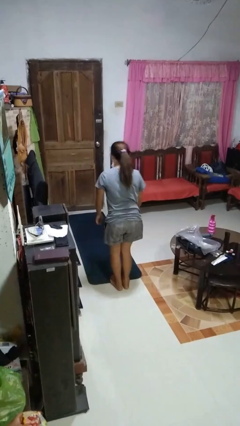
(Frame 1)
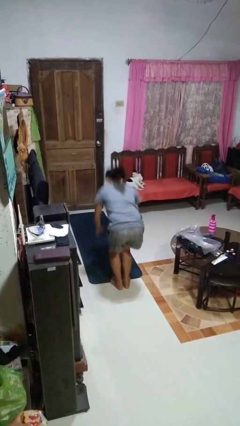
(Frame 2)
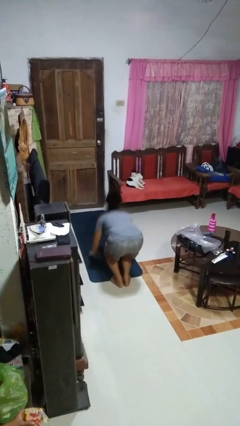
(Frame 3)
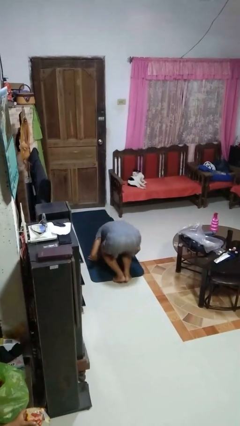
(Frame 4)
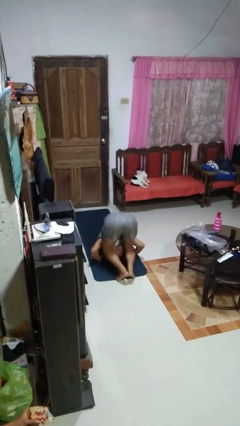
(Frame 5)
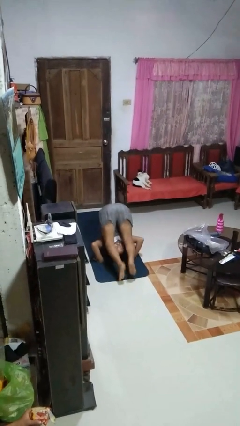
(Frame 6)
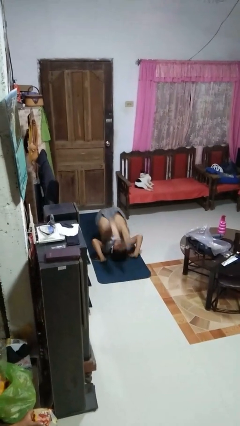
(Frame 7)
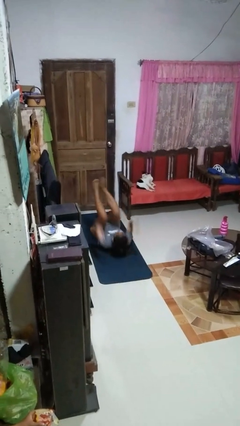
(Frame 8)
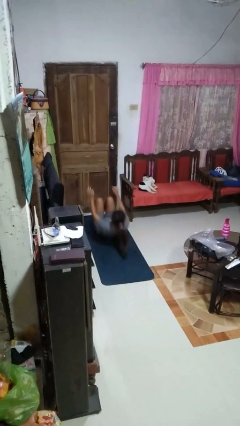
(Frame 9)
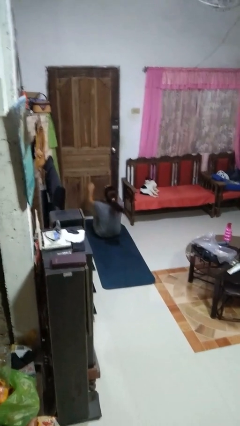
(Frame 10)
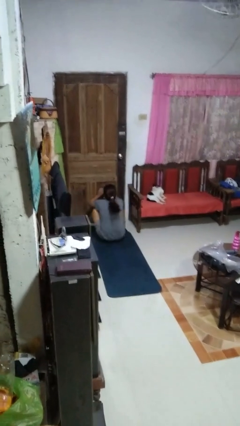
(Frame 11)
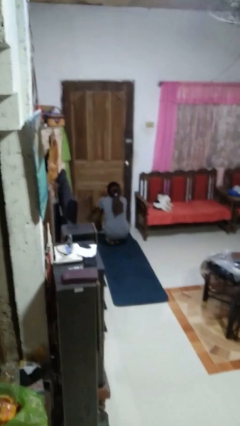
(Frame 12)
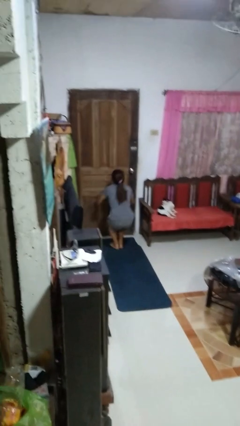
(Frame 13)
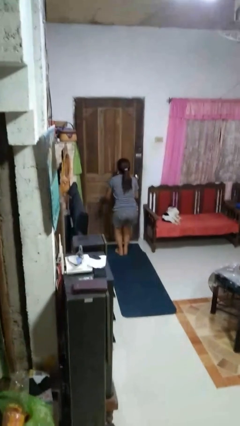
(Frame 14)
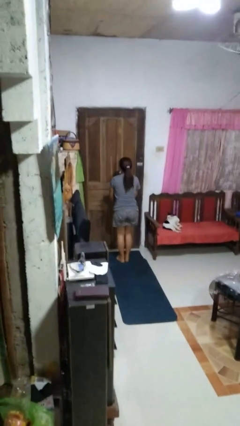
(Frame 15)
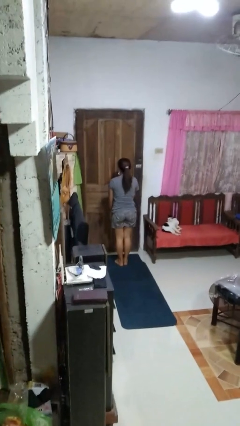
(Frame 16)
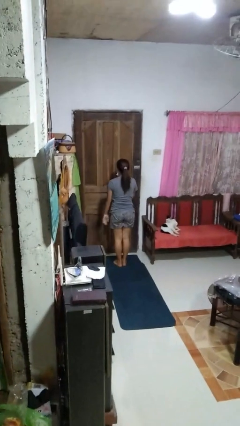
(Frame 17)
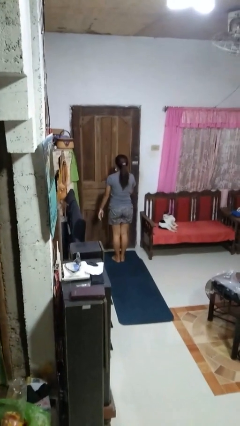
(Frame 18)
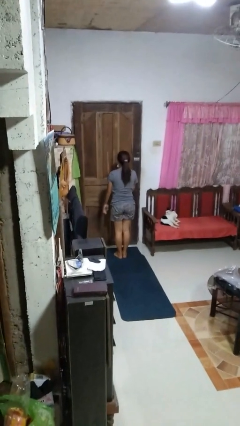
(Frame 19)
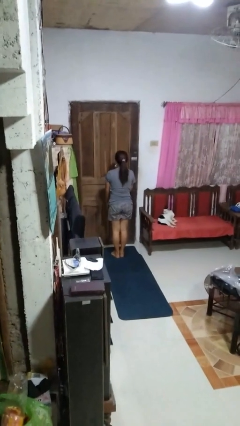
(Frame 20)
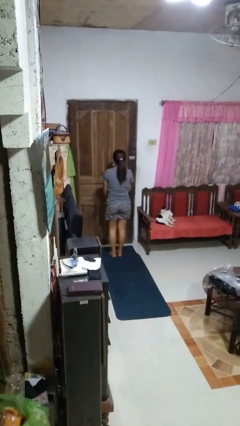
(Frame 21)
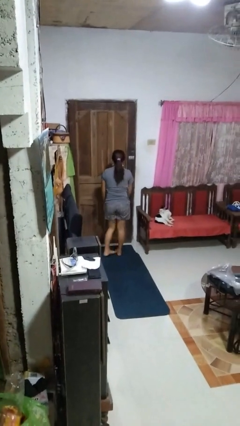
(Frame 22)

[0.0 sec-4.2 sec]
person somersaults

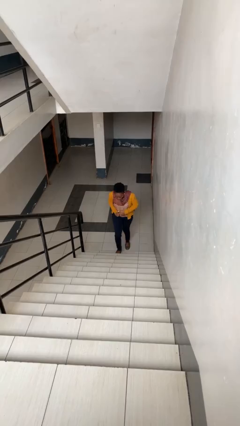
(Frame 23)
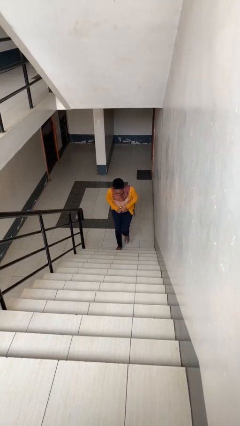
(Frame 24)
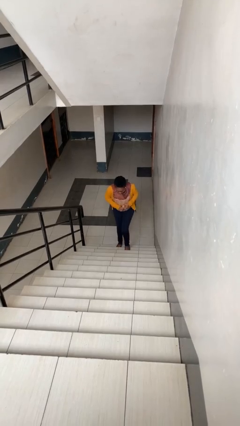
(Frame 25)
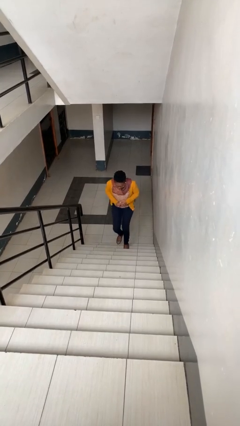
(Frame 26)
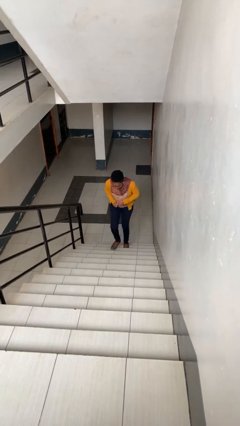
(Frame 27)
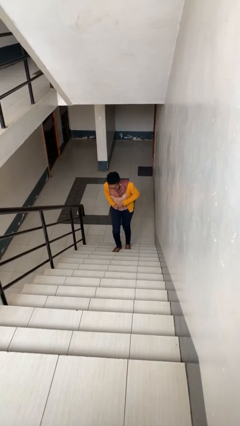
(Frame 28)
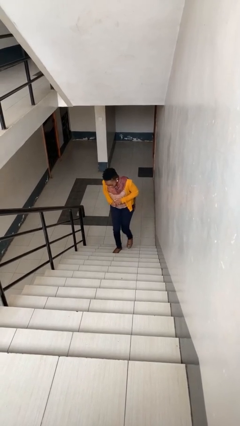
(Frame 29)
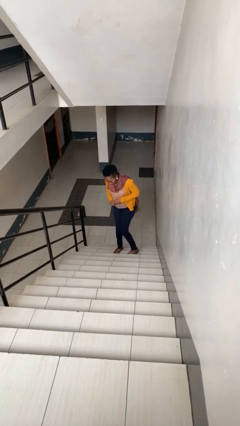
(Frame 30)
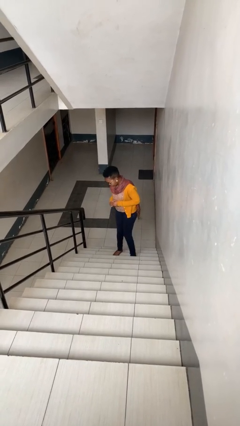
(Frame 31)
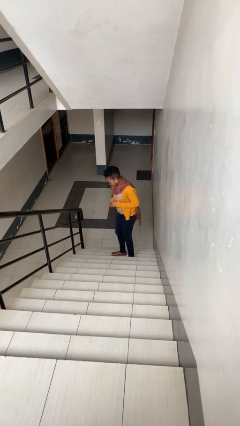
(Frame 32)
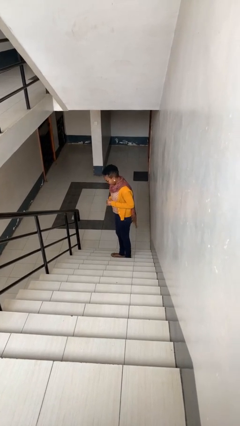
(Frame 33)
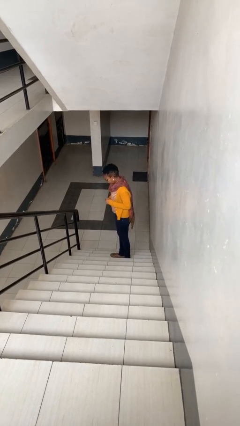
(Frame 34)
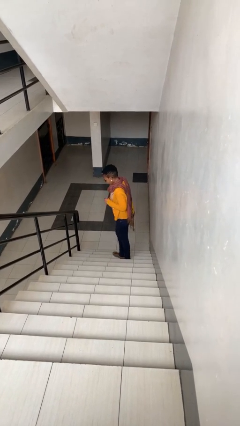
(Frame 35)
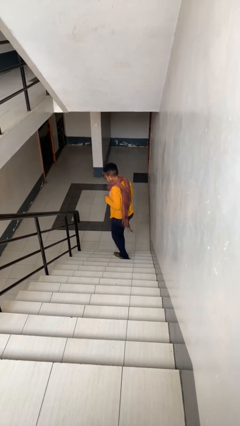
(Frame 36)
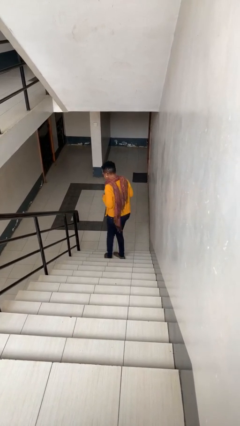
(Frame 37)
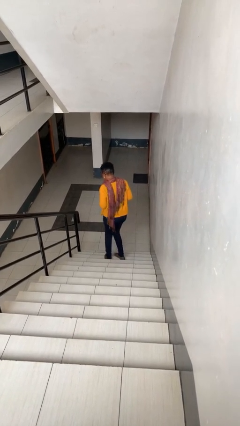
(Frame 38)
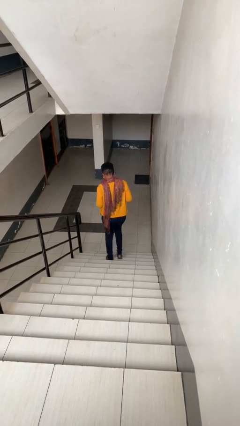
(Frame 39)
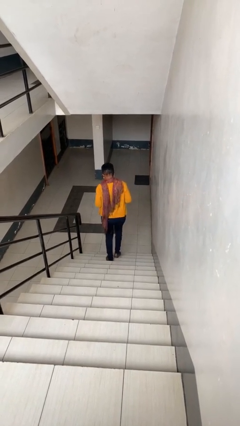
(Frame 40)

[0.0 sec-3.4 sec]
person climbs up stairs

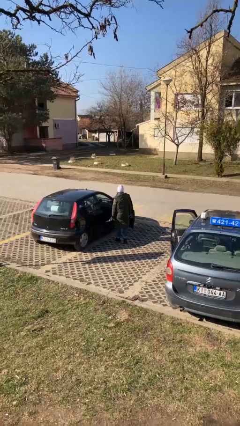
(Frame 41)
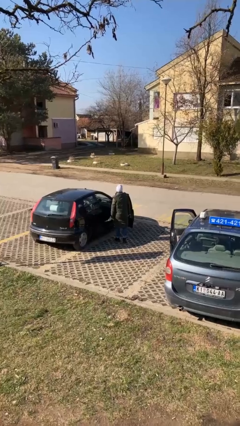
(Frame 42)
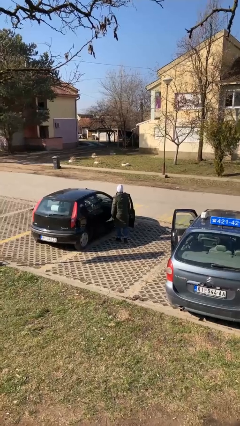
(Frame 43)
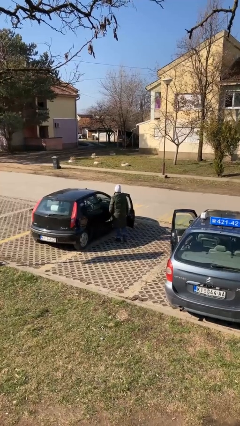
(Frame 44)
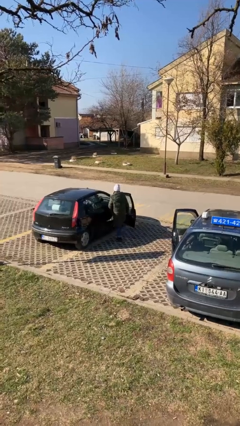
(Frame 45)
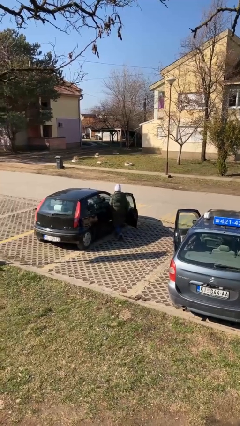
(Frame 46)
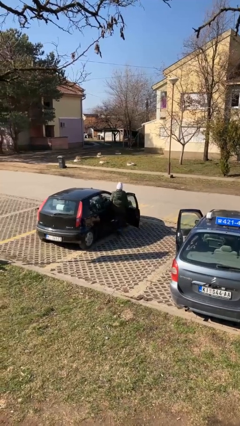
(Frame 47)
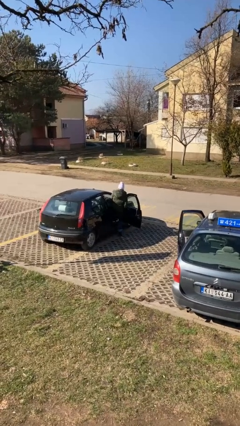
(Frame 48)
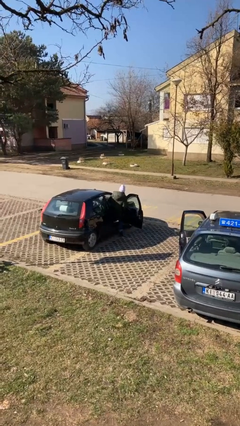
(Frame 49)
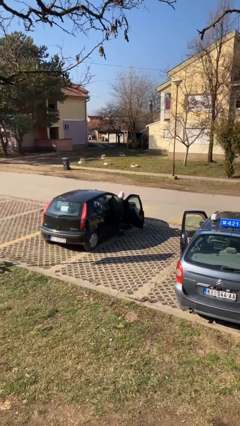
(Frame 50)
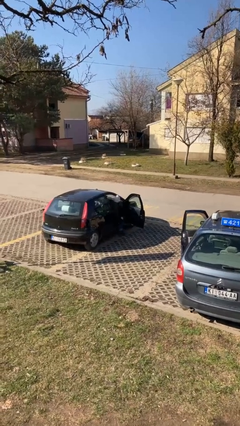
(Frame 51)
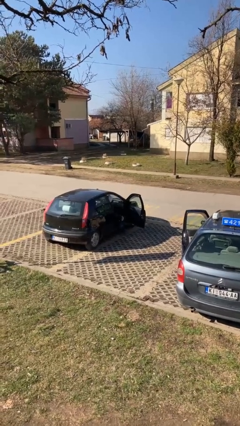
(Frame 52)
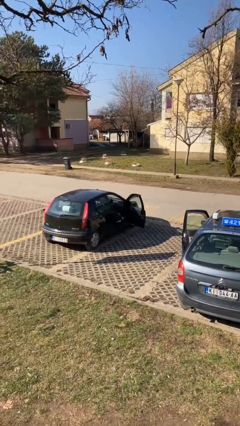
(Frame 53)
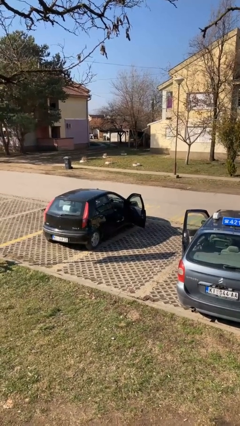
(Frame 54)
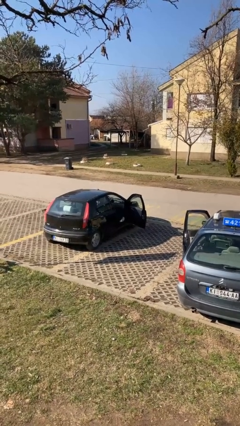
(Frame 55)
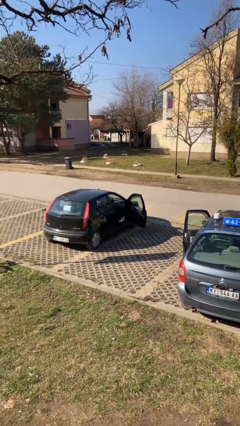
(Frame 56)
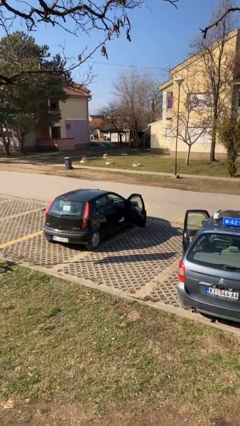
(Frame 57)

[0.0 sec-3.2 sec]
person enters car

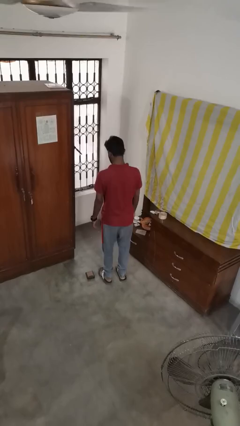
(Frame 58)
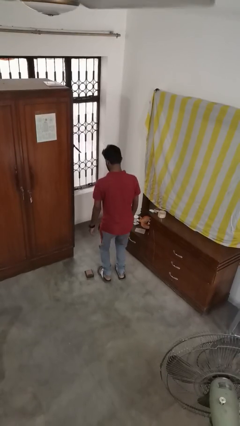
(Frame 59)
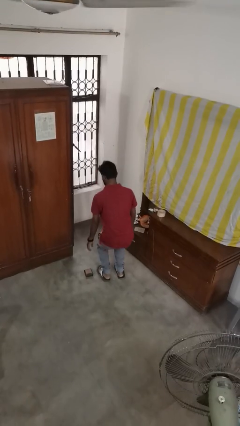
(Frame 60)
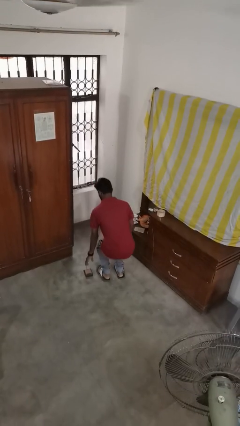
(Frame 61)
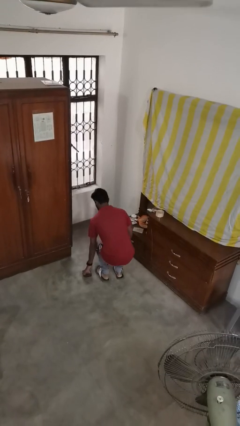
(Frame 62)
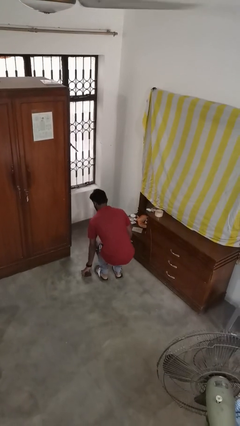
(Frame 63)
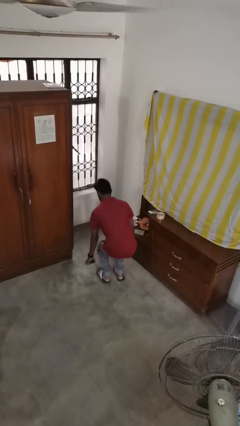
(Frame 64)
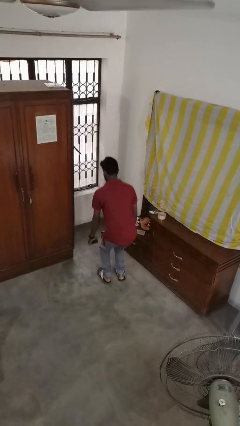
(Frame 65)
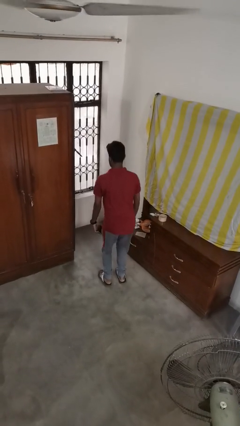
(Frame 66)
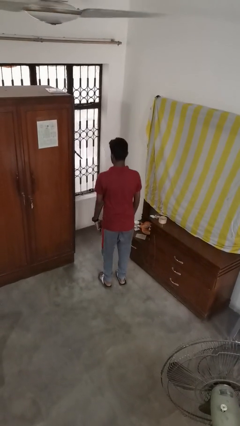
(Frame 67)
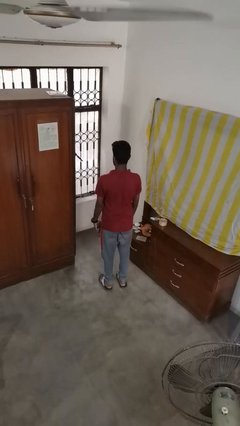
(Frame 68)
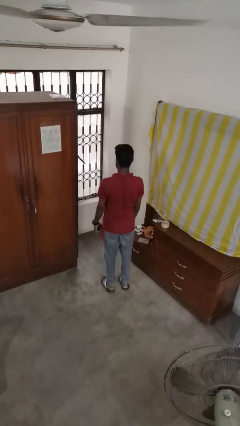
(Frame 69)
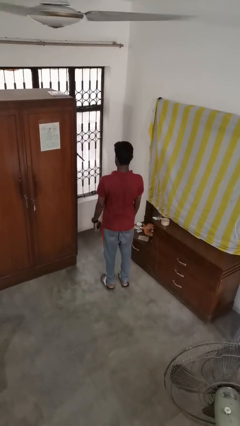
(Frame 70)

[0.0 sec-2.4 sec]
person picks up object from floor

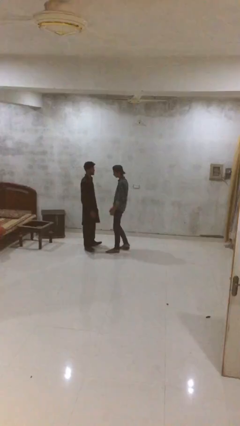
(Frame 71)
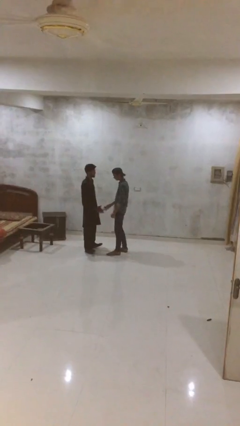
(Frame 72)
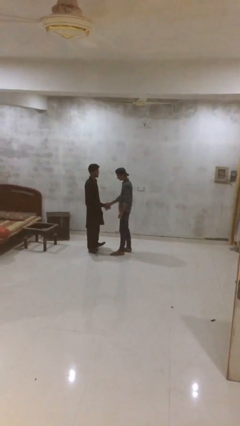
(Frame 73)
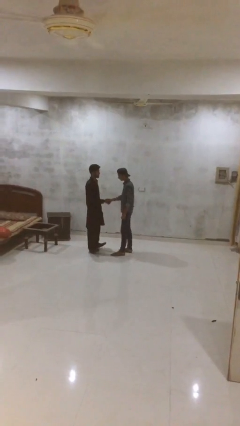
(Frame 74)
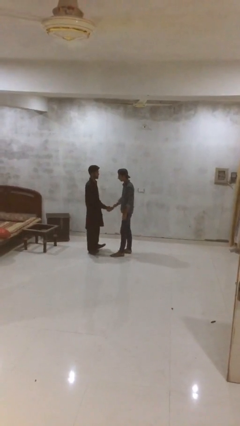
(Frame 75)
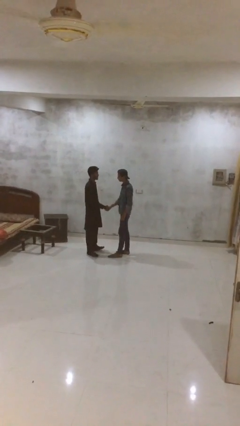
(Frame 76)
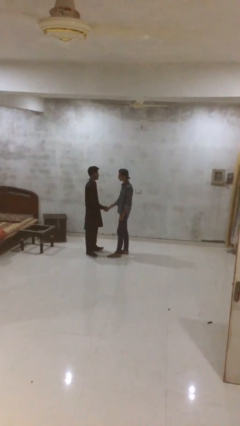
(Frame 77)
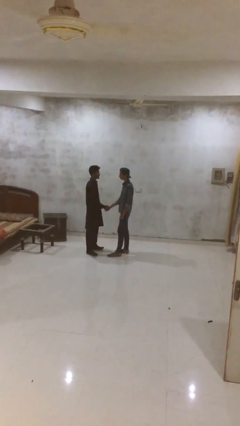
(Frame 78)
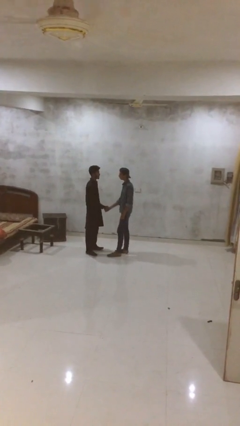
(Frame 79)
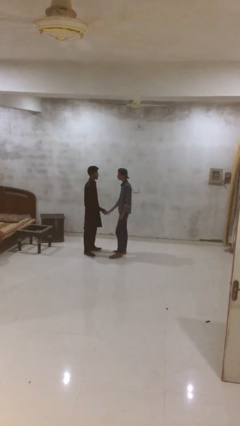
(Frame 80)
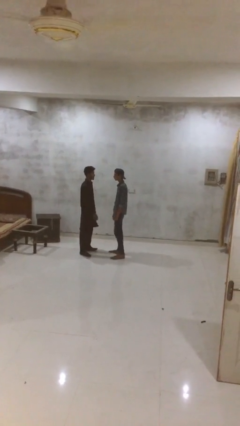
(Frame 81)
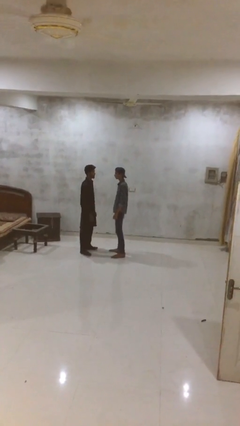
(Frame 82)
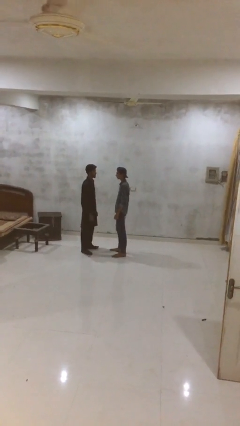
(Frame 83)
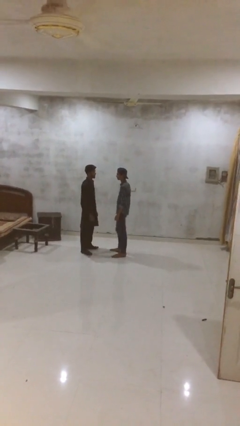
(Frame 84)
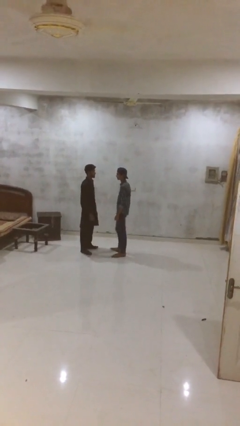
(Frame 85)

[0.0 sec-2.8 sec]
person shakes hand

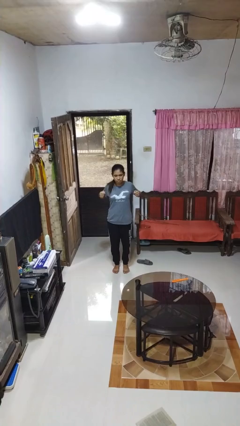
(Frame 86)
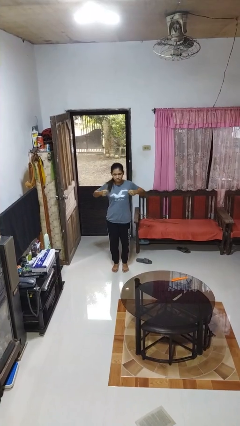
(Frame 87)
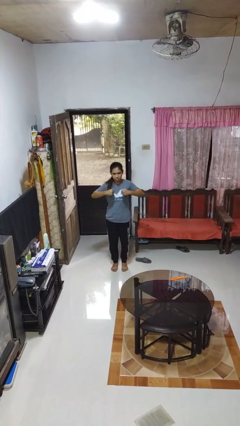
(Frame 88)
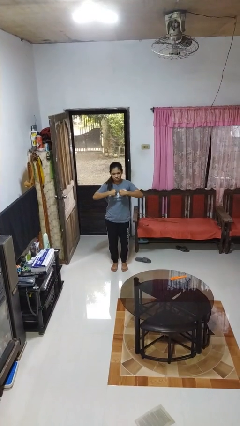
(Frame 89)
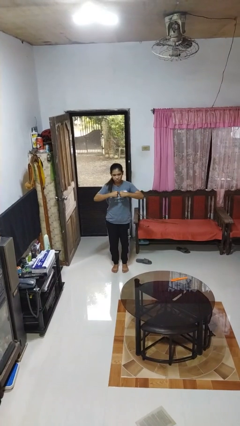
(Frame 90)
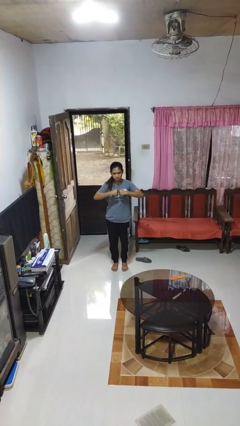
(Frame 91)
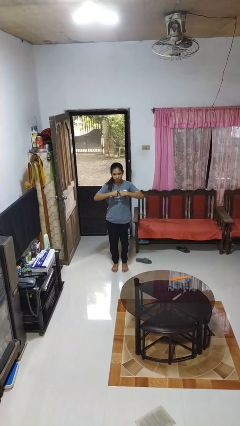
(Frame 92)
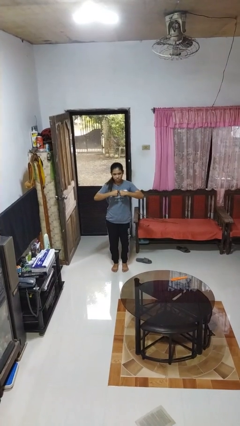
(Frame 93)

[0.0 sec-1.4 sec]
person gestures zoom out

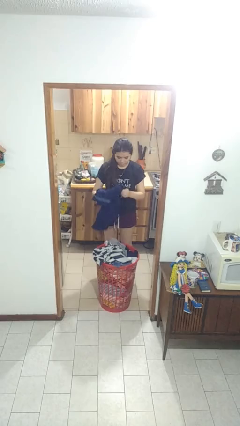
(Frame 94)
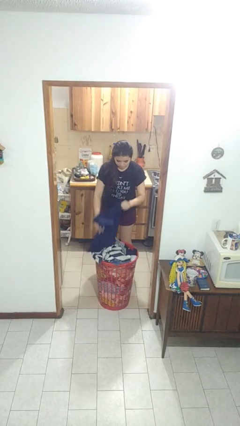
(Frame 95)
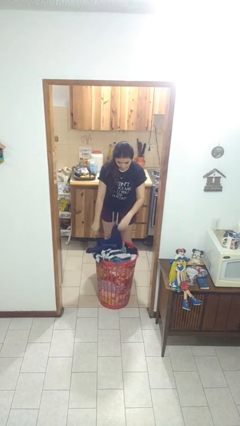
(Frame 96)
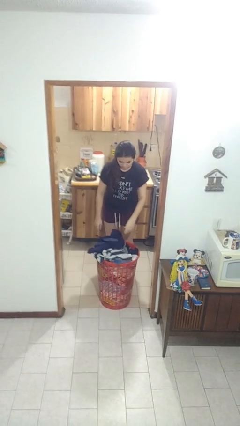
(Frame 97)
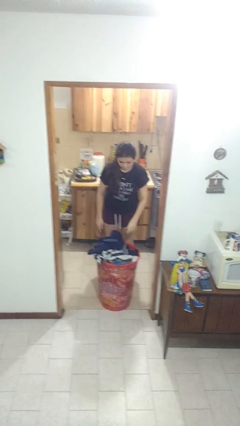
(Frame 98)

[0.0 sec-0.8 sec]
person puts object into basket
